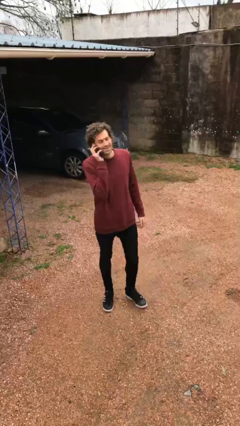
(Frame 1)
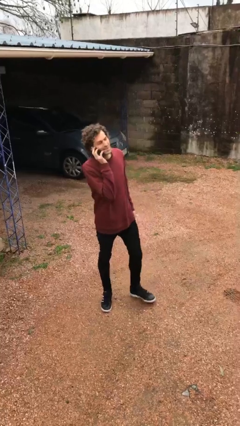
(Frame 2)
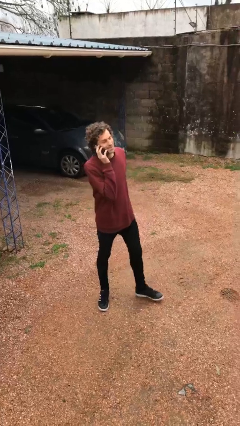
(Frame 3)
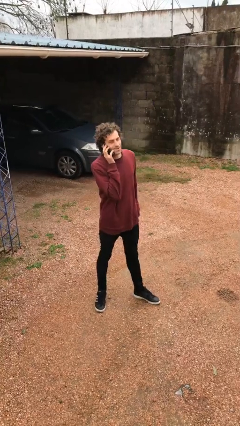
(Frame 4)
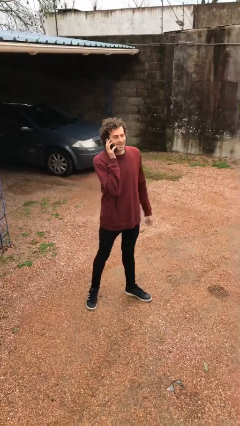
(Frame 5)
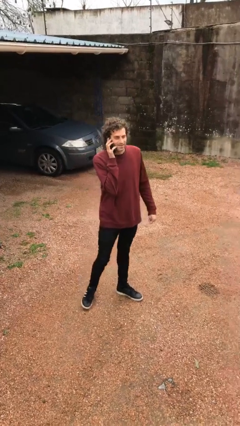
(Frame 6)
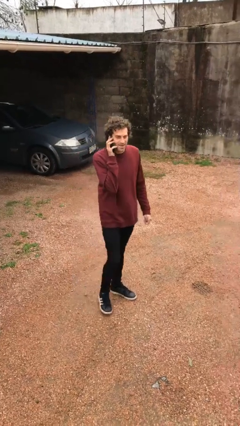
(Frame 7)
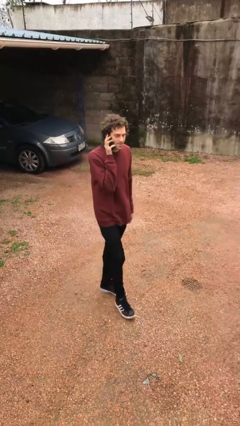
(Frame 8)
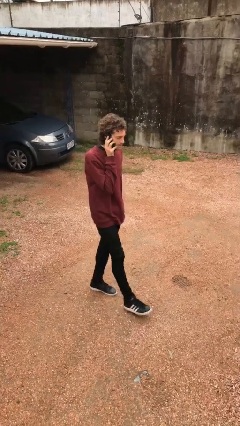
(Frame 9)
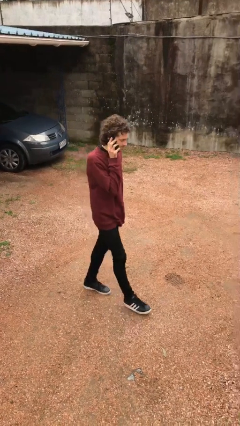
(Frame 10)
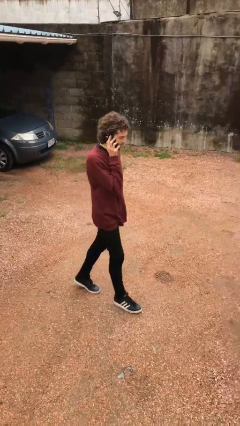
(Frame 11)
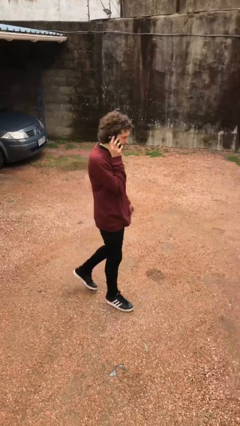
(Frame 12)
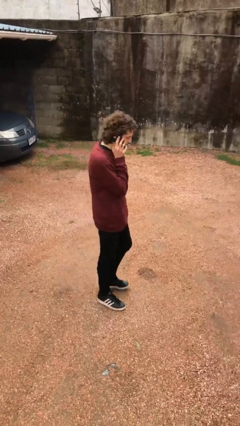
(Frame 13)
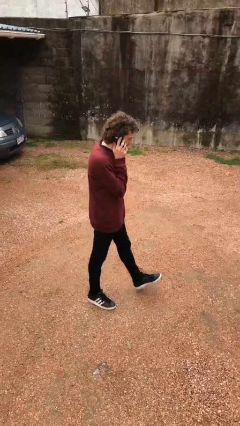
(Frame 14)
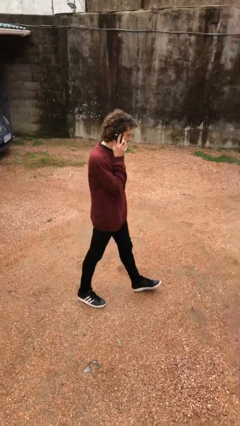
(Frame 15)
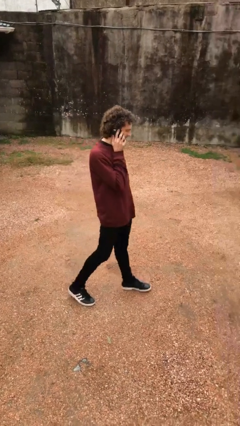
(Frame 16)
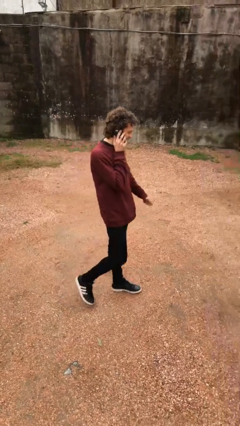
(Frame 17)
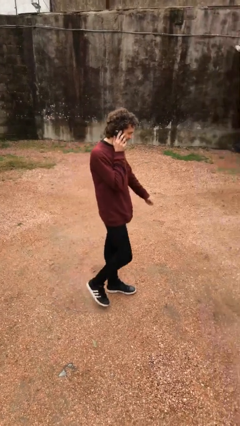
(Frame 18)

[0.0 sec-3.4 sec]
person talks on phone

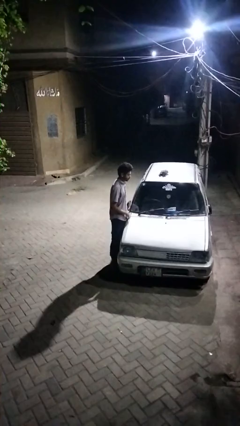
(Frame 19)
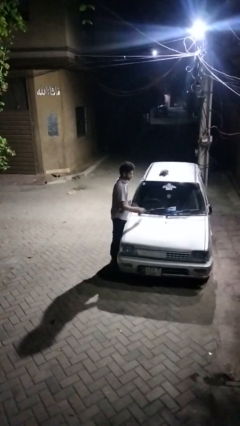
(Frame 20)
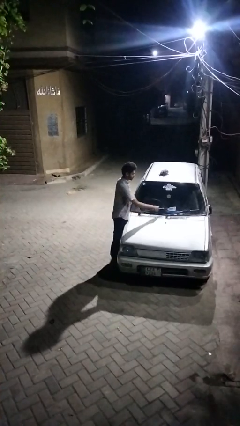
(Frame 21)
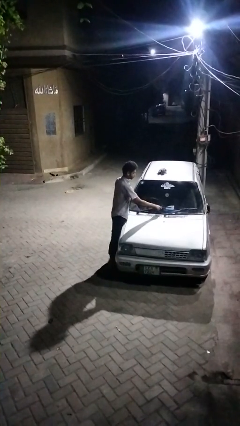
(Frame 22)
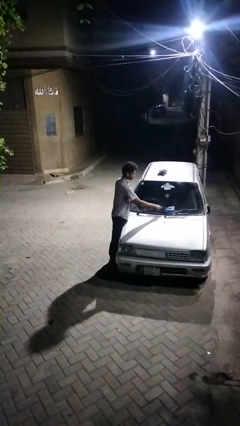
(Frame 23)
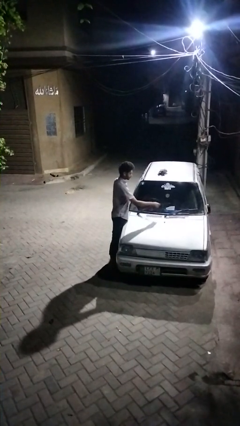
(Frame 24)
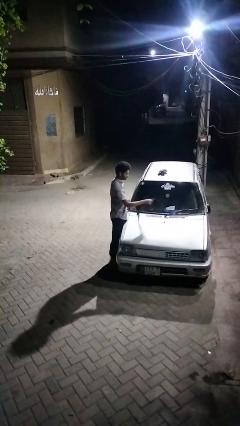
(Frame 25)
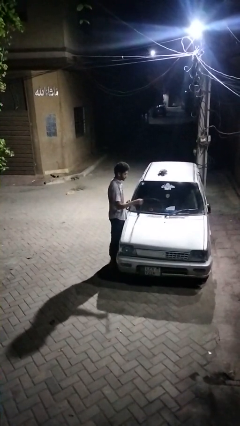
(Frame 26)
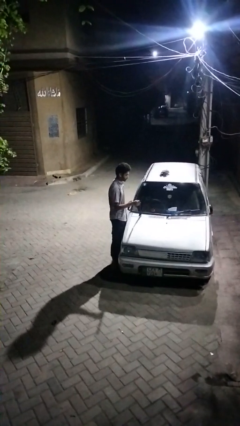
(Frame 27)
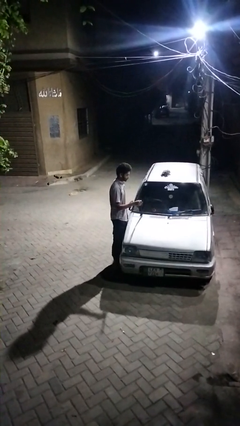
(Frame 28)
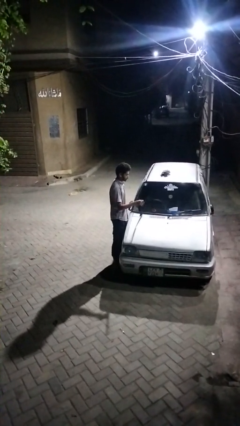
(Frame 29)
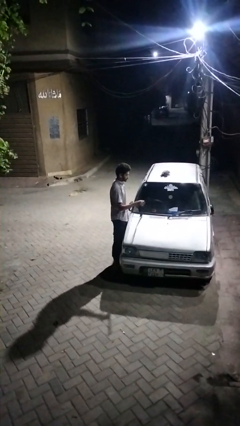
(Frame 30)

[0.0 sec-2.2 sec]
person flips up car wipers

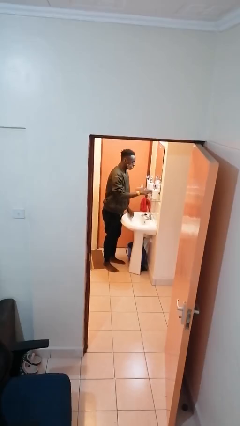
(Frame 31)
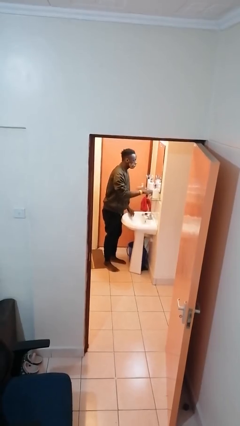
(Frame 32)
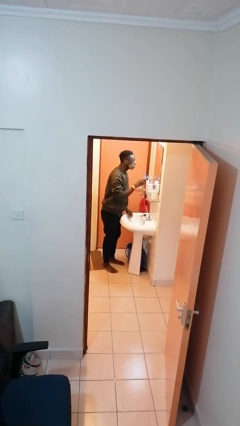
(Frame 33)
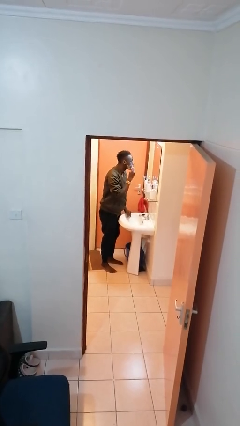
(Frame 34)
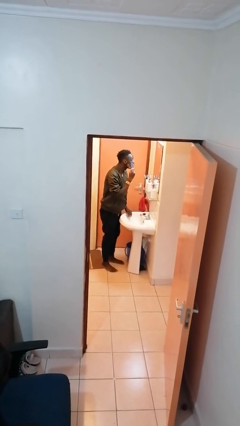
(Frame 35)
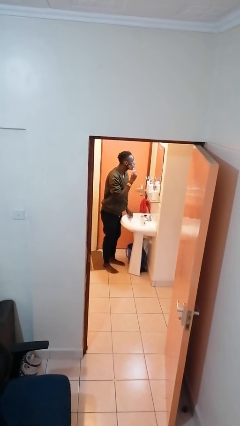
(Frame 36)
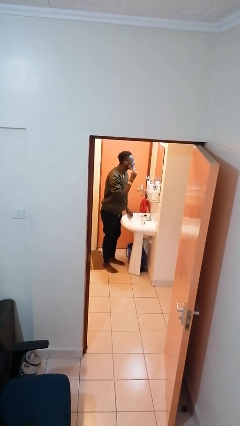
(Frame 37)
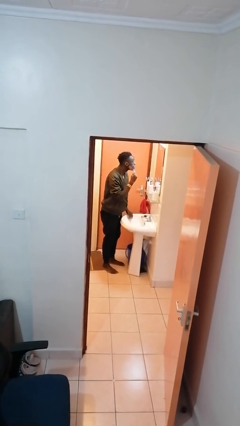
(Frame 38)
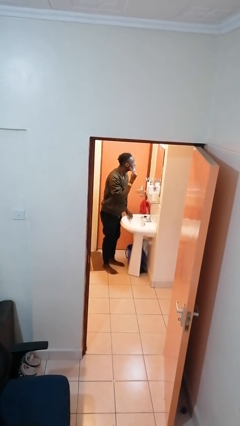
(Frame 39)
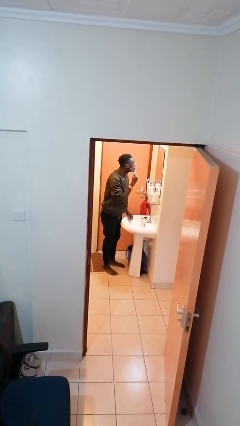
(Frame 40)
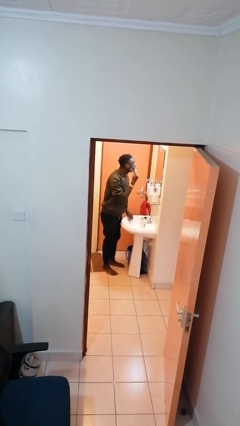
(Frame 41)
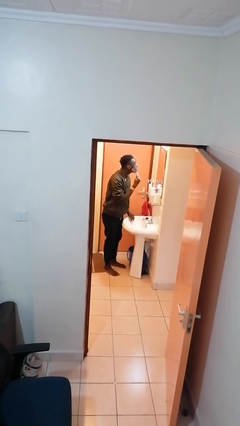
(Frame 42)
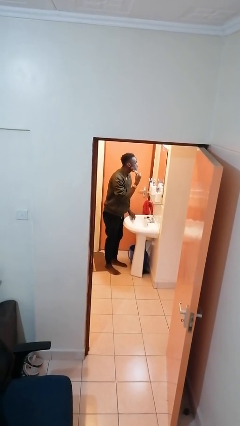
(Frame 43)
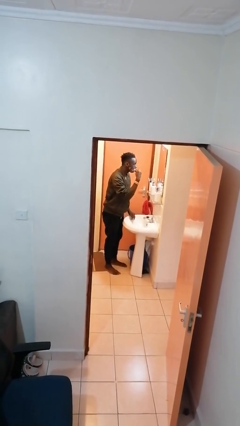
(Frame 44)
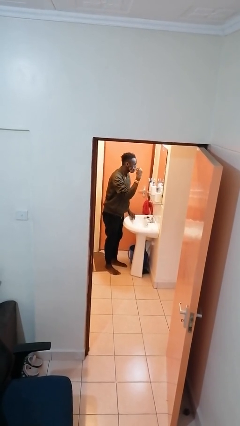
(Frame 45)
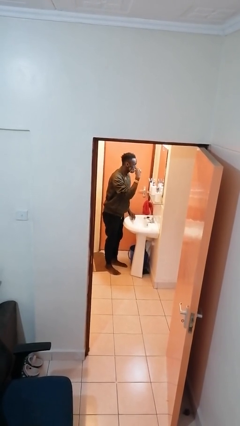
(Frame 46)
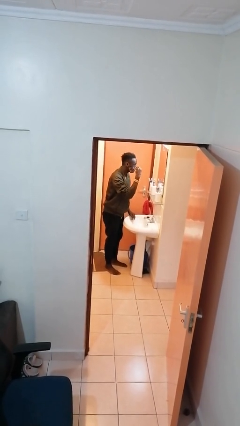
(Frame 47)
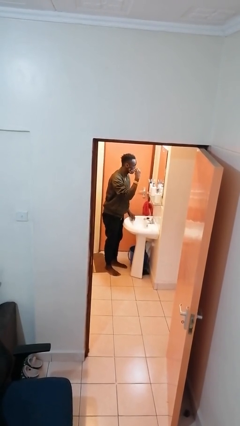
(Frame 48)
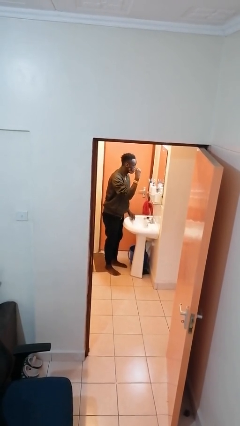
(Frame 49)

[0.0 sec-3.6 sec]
person shaves face

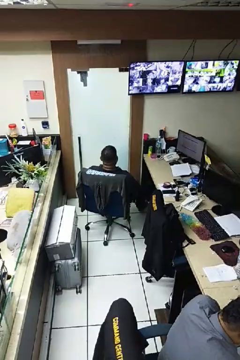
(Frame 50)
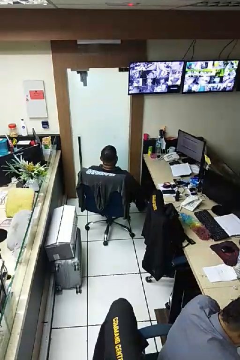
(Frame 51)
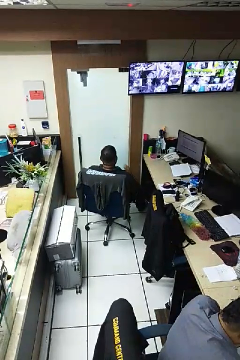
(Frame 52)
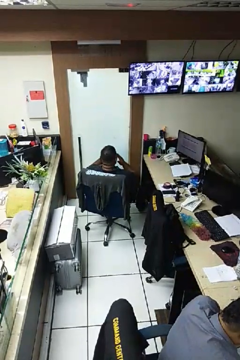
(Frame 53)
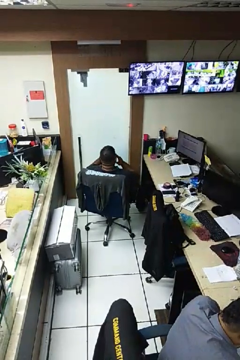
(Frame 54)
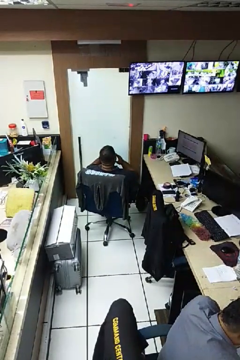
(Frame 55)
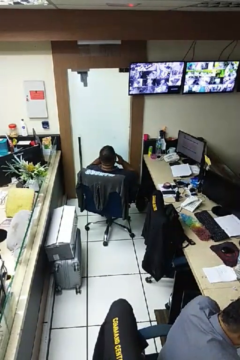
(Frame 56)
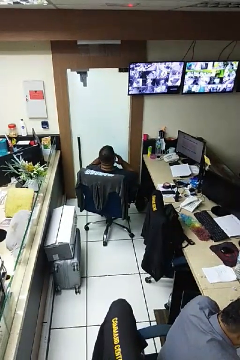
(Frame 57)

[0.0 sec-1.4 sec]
person covers face with hands

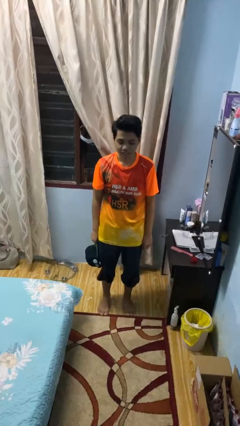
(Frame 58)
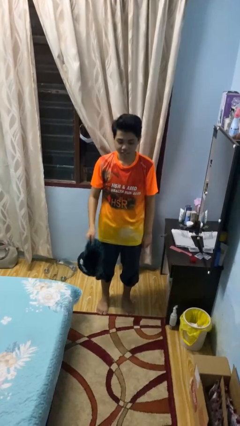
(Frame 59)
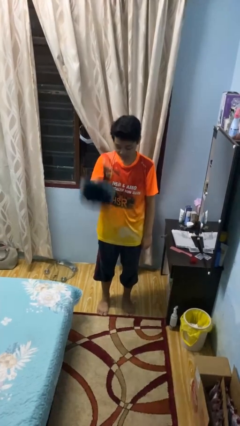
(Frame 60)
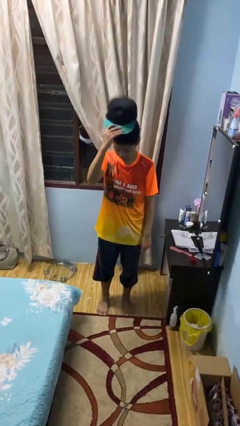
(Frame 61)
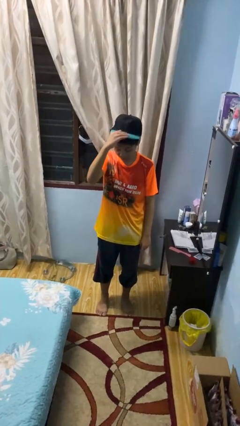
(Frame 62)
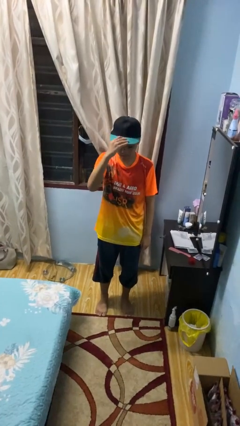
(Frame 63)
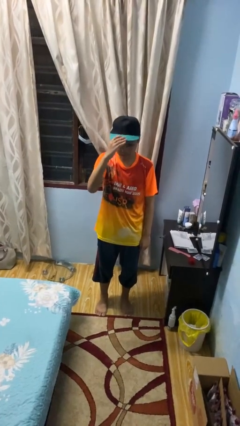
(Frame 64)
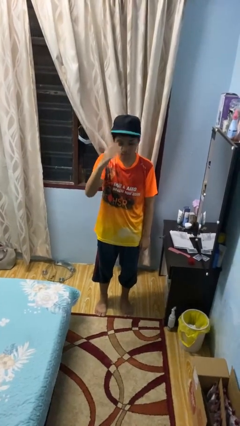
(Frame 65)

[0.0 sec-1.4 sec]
person puts on hat

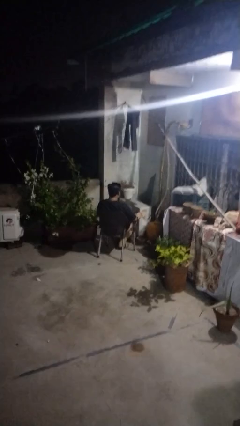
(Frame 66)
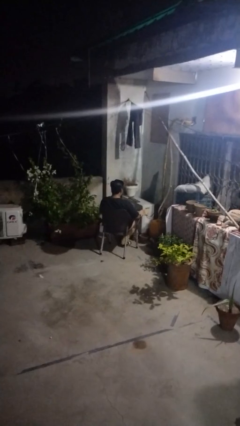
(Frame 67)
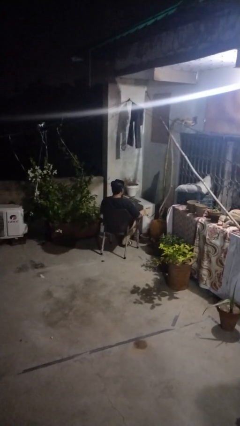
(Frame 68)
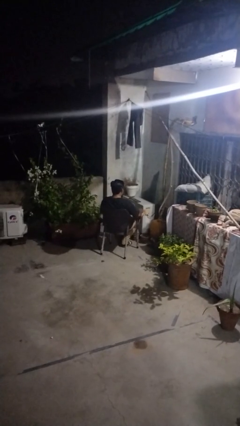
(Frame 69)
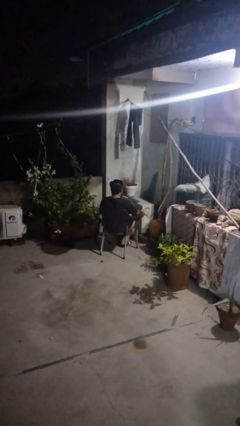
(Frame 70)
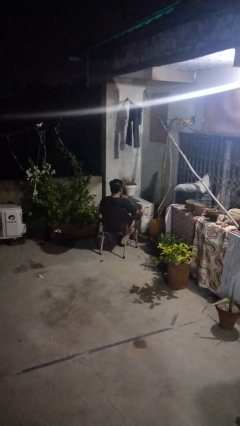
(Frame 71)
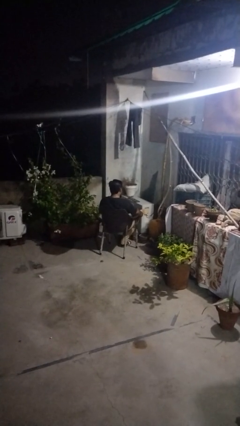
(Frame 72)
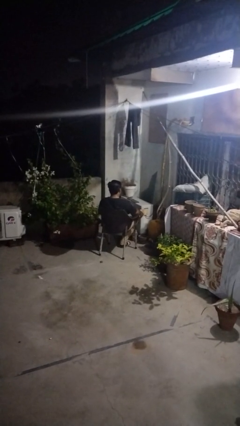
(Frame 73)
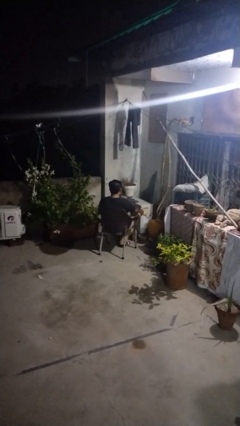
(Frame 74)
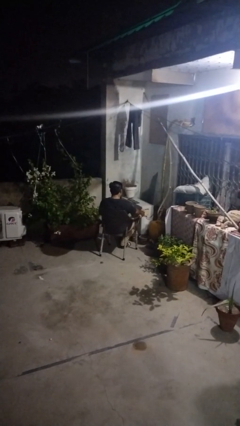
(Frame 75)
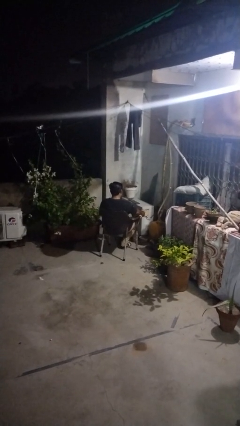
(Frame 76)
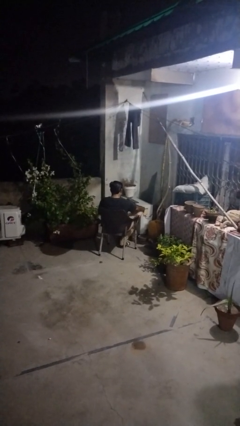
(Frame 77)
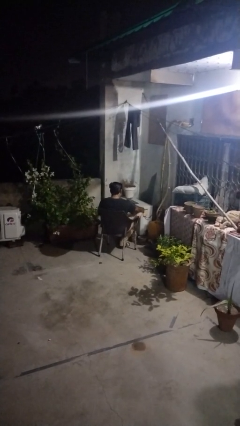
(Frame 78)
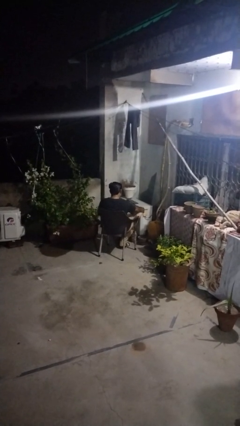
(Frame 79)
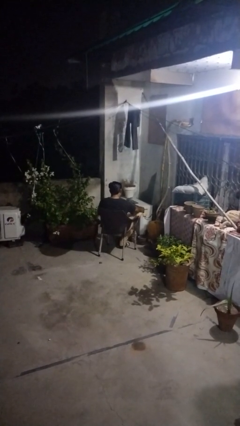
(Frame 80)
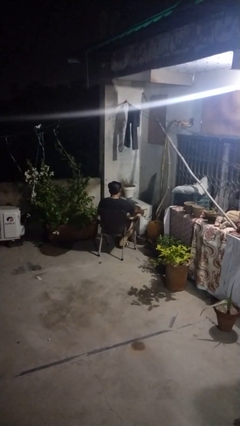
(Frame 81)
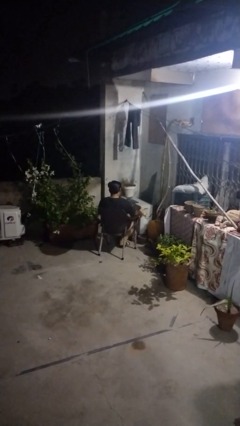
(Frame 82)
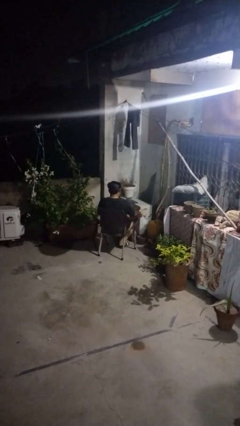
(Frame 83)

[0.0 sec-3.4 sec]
person rubs foot

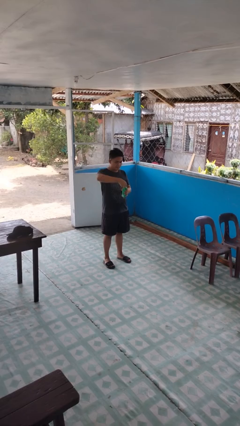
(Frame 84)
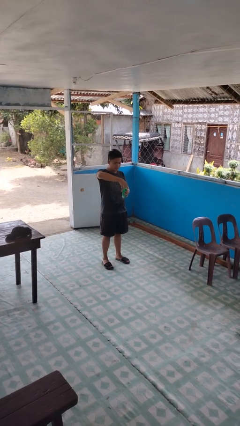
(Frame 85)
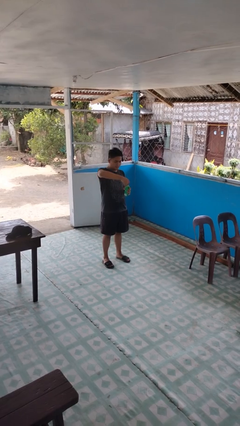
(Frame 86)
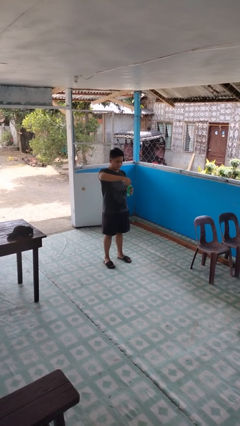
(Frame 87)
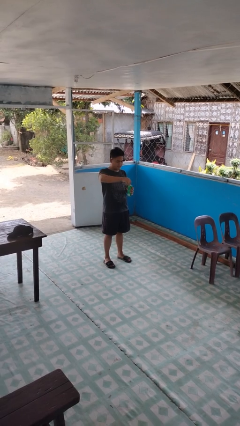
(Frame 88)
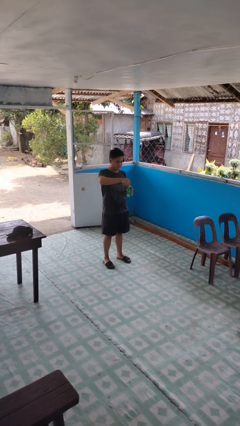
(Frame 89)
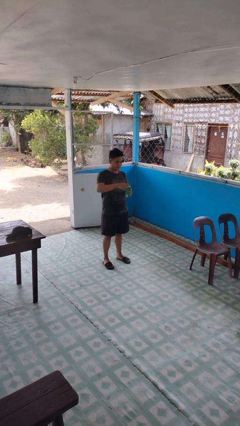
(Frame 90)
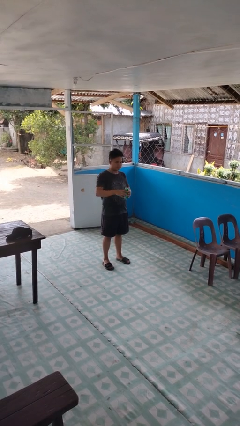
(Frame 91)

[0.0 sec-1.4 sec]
person opens beverage can

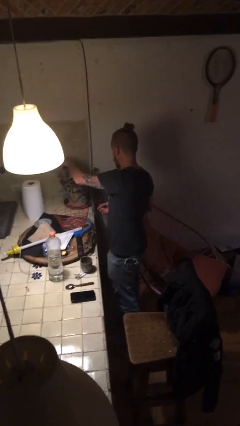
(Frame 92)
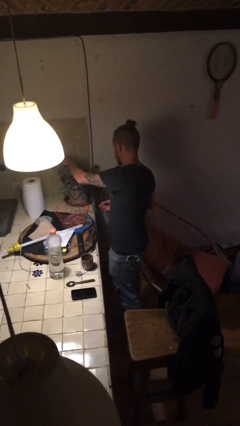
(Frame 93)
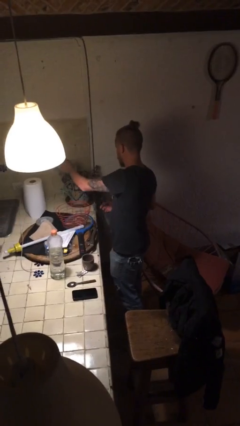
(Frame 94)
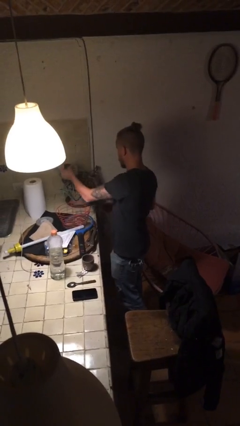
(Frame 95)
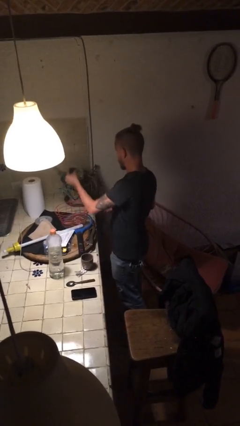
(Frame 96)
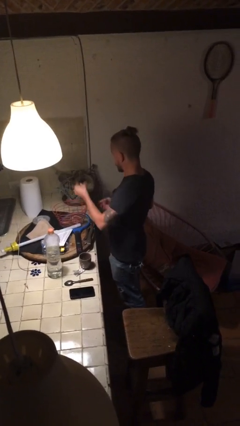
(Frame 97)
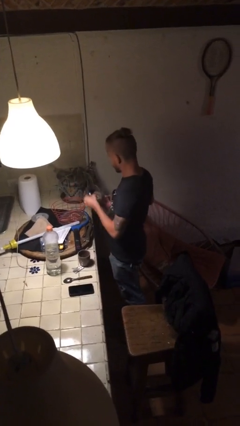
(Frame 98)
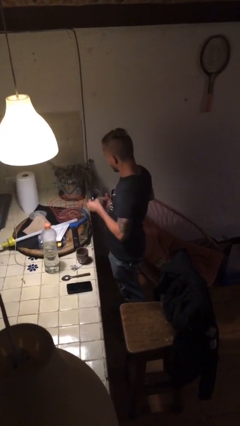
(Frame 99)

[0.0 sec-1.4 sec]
person waters houseplant
